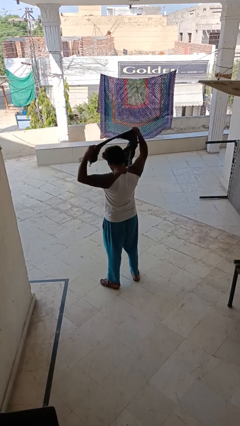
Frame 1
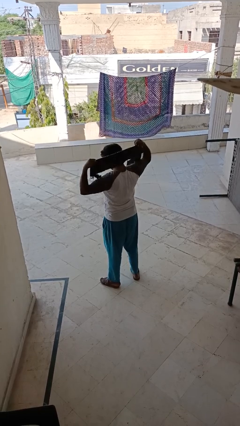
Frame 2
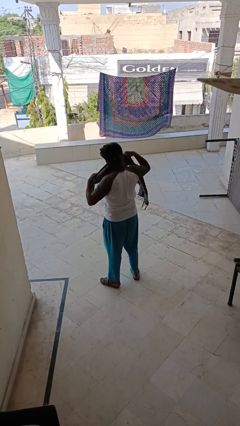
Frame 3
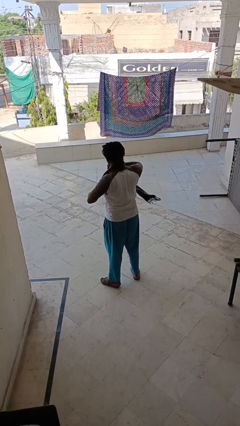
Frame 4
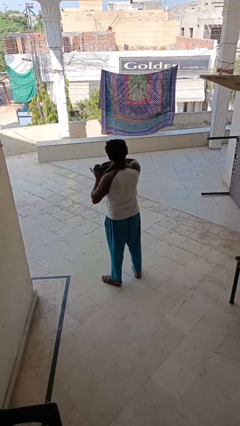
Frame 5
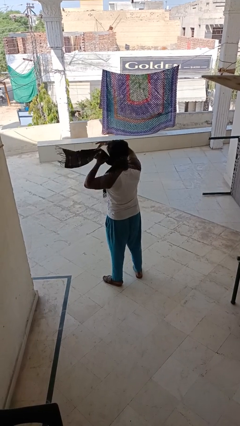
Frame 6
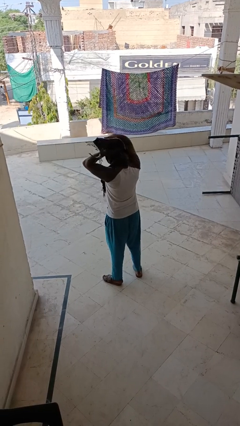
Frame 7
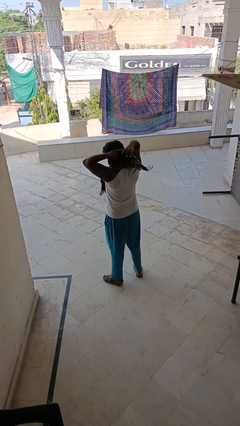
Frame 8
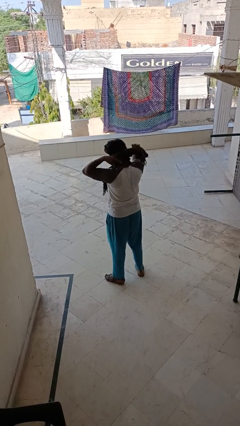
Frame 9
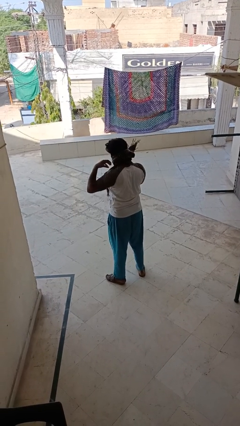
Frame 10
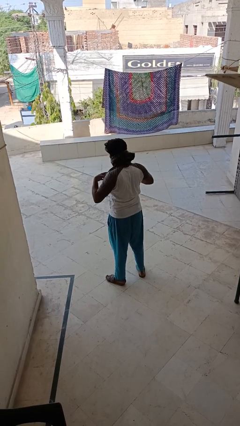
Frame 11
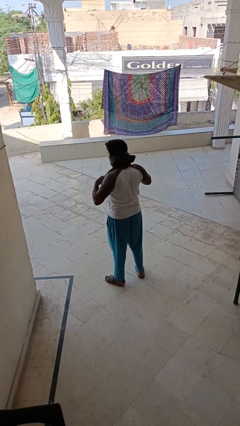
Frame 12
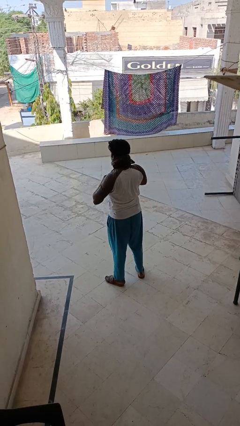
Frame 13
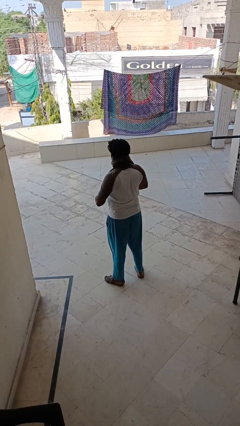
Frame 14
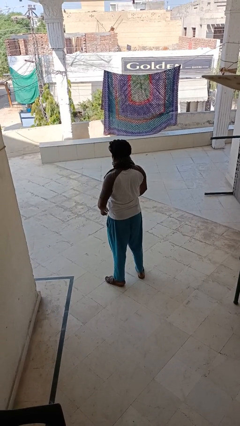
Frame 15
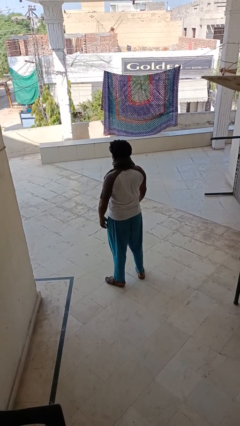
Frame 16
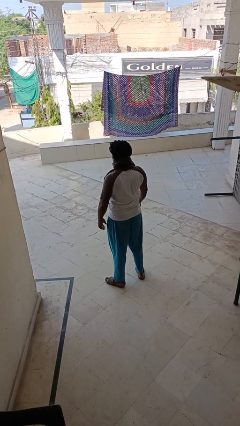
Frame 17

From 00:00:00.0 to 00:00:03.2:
person puts on scarf

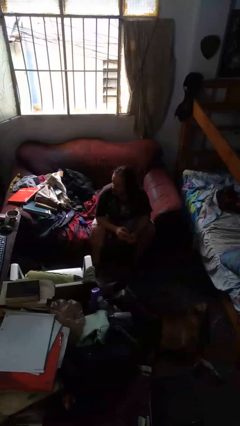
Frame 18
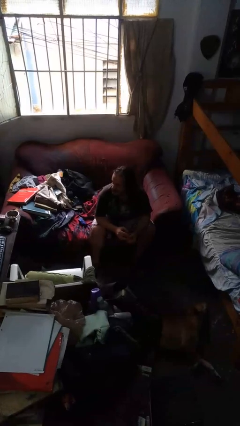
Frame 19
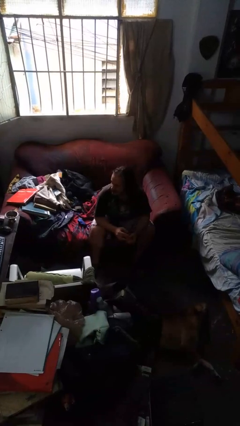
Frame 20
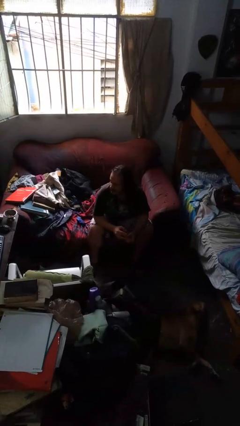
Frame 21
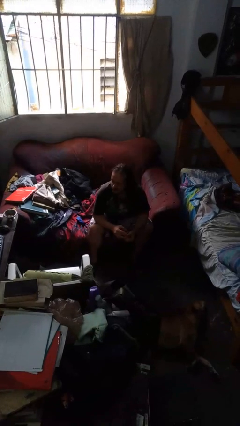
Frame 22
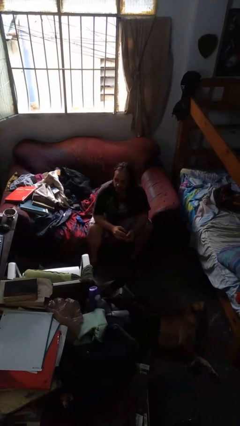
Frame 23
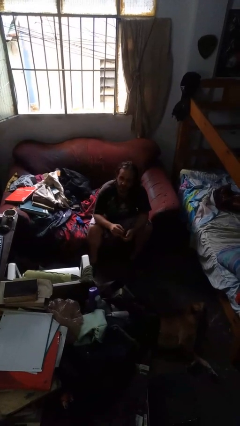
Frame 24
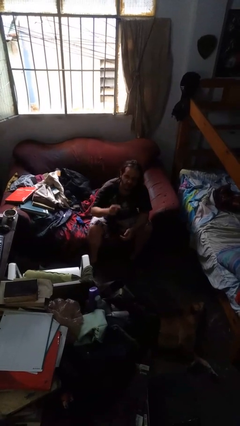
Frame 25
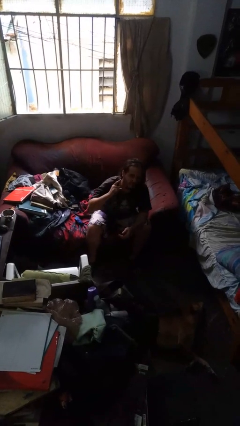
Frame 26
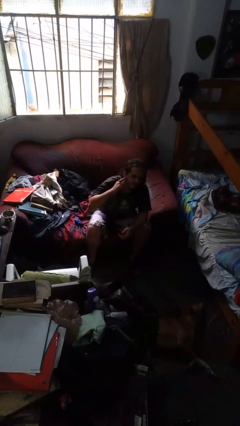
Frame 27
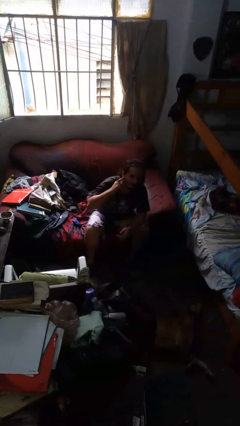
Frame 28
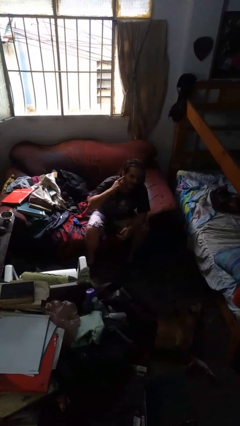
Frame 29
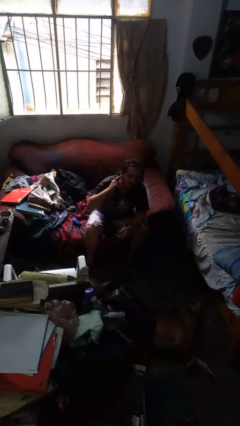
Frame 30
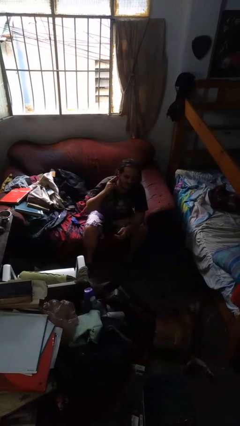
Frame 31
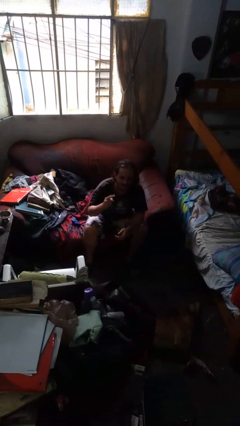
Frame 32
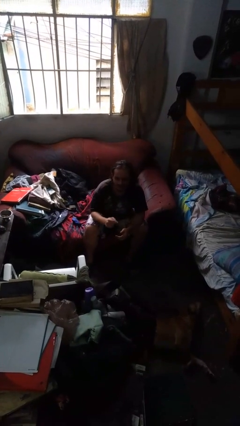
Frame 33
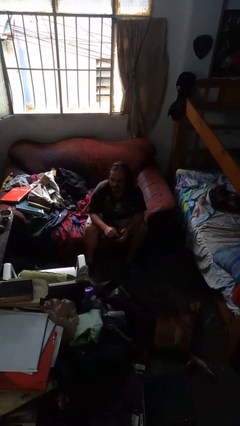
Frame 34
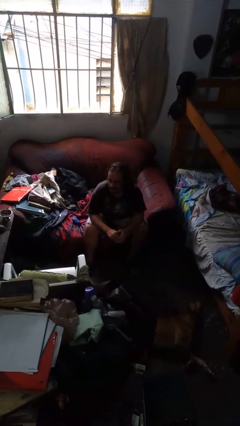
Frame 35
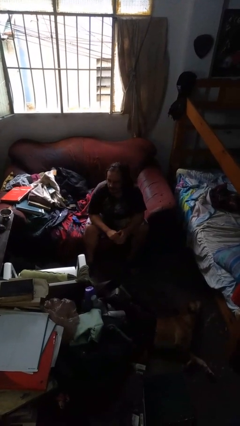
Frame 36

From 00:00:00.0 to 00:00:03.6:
person gestures listen closely

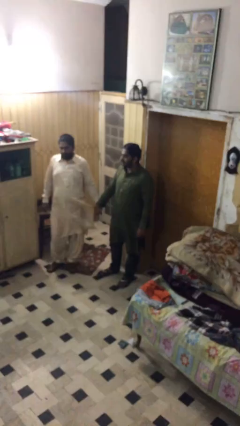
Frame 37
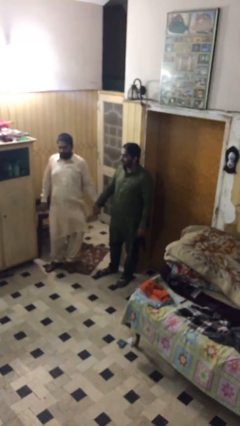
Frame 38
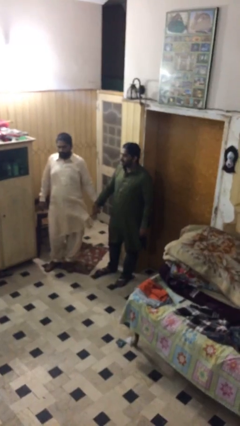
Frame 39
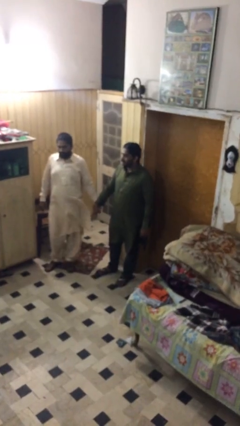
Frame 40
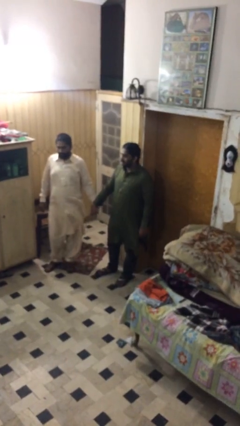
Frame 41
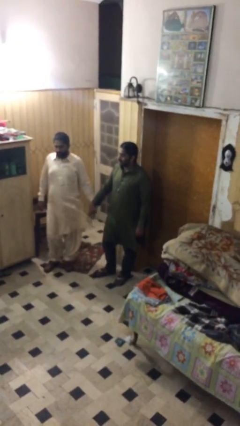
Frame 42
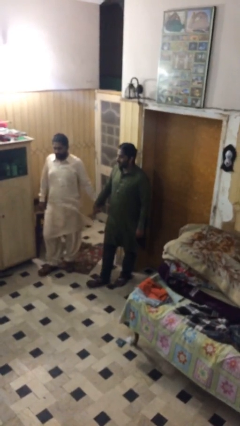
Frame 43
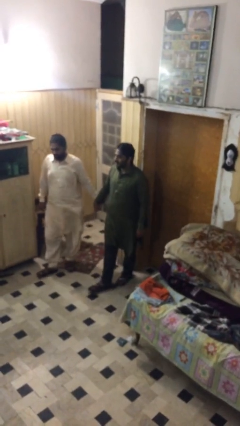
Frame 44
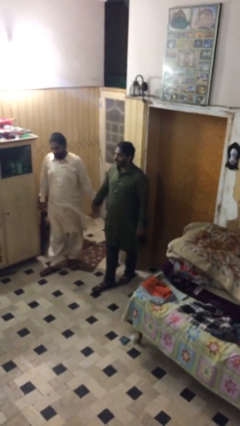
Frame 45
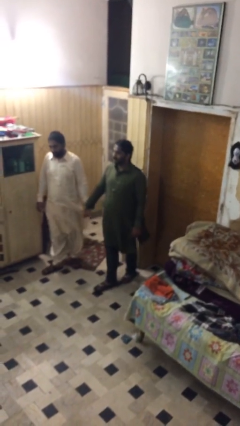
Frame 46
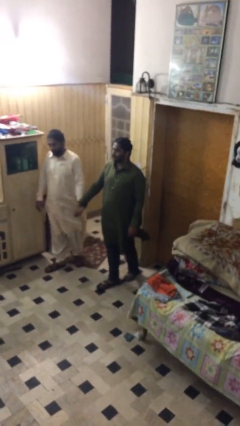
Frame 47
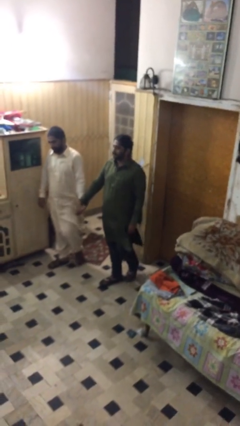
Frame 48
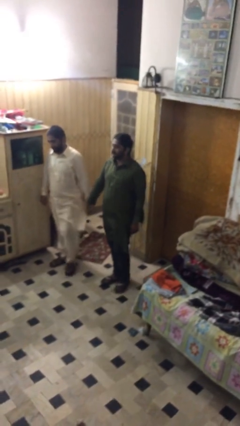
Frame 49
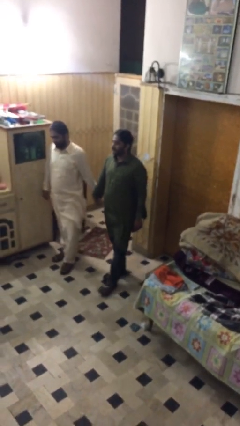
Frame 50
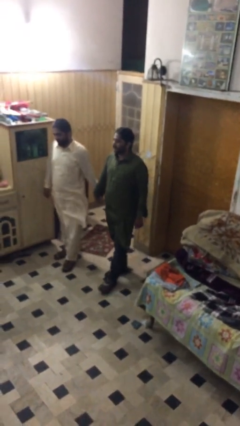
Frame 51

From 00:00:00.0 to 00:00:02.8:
person holds hand

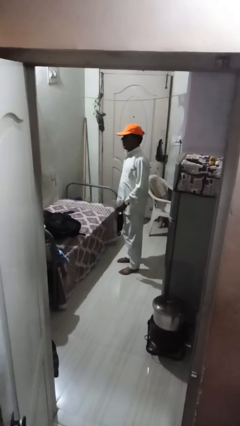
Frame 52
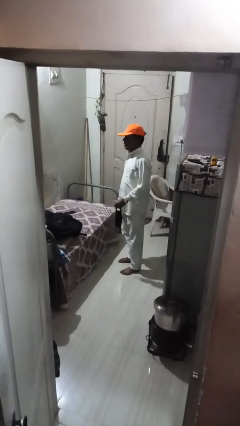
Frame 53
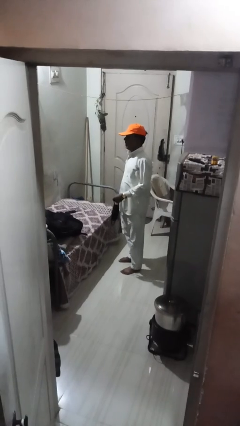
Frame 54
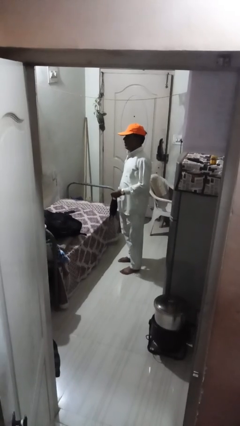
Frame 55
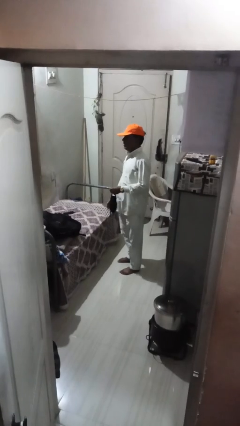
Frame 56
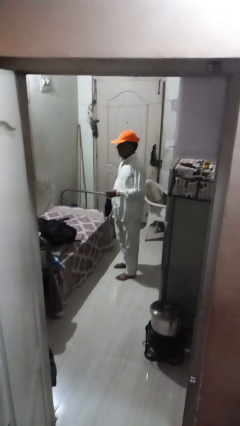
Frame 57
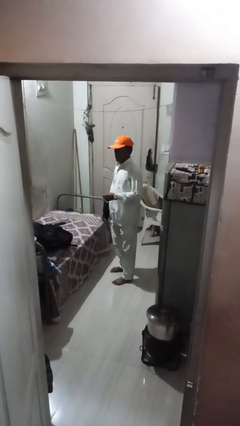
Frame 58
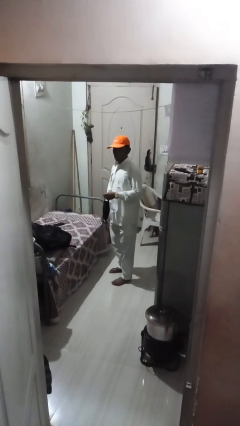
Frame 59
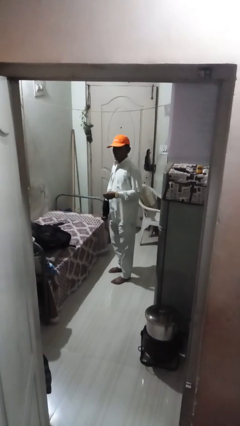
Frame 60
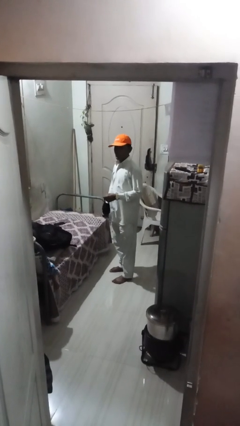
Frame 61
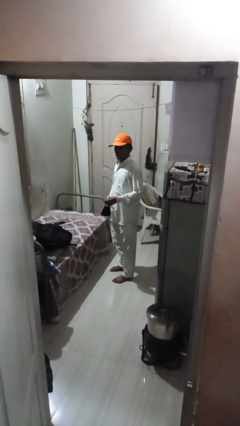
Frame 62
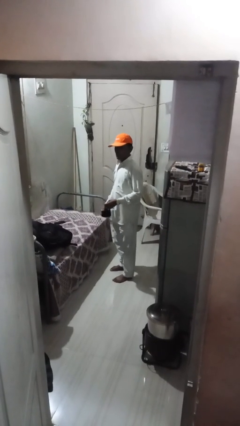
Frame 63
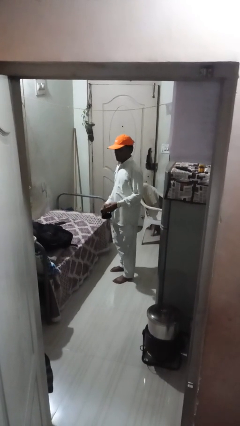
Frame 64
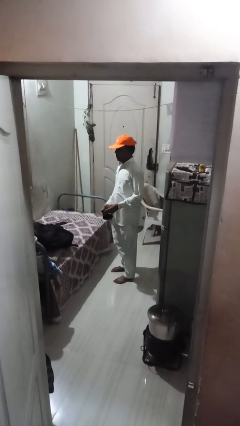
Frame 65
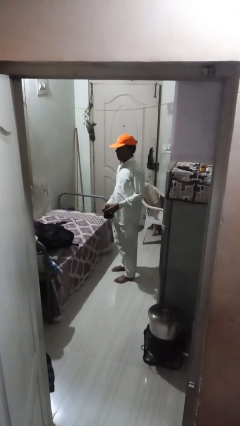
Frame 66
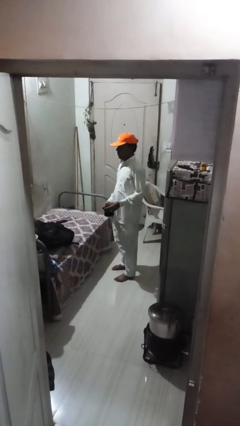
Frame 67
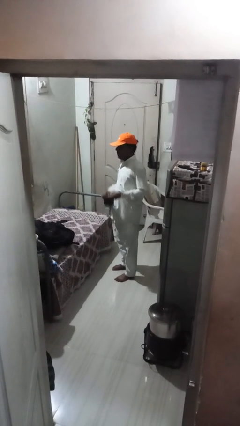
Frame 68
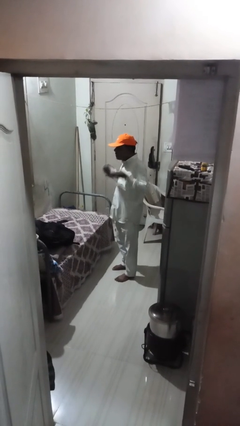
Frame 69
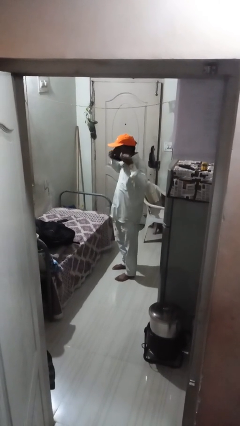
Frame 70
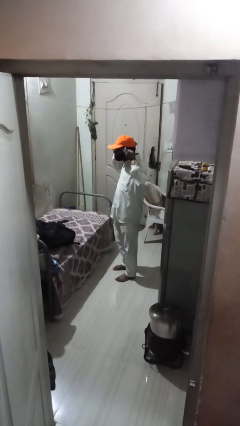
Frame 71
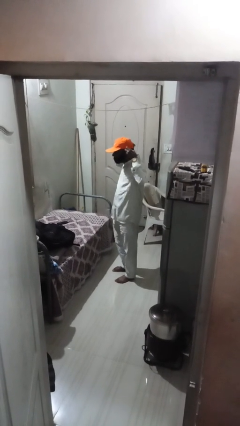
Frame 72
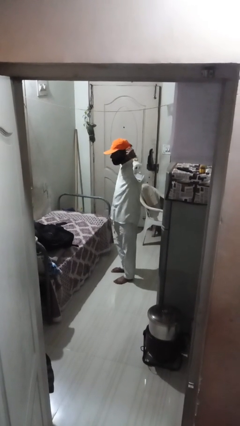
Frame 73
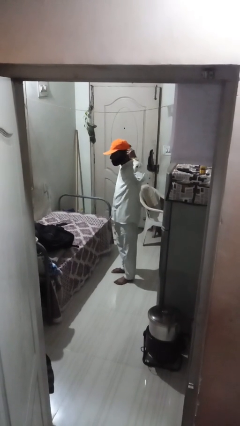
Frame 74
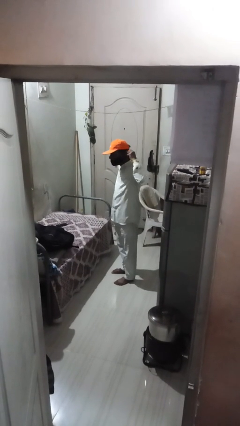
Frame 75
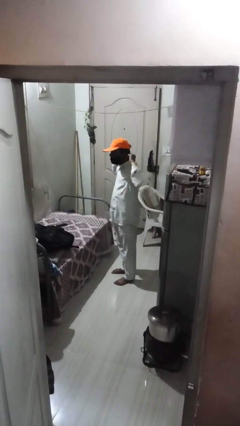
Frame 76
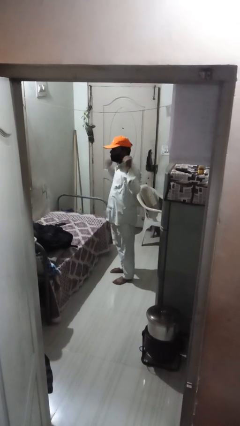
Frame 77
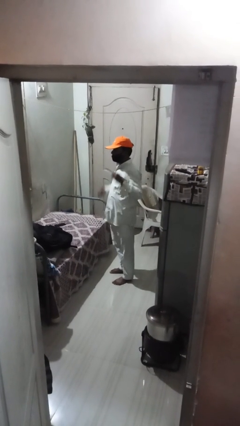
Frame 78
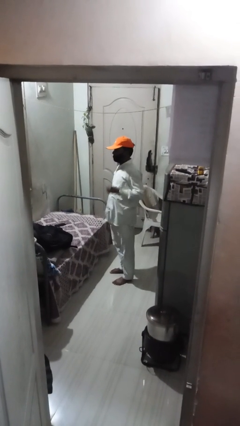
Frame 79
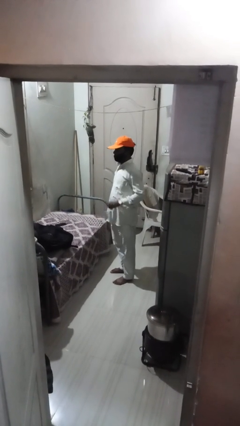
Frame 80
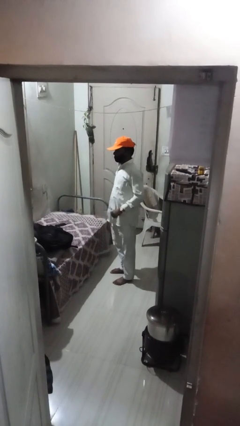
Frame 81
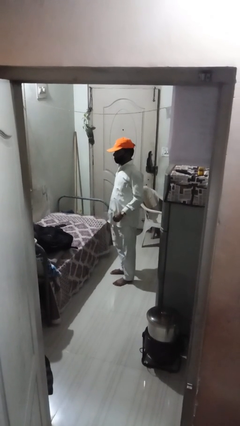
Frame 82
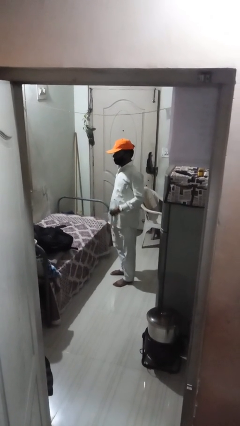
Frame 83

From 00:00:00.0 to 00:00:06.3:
person puts on facemask

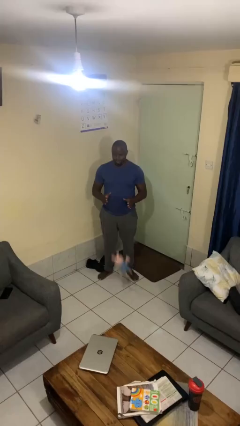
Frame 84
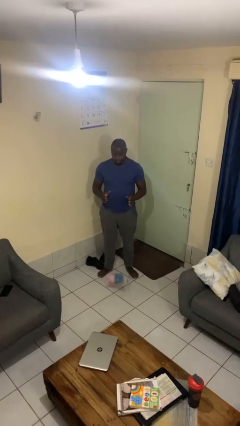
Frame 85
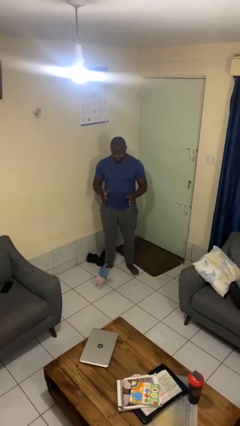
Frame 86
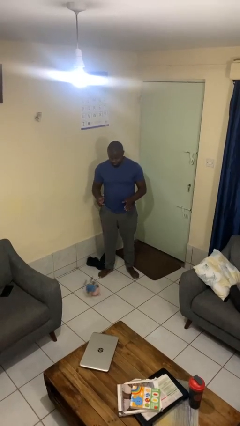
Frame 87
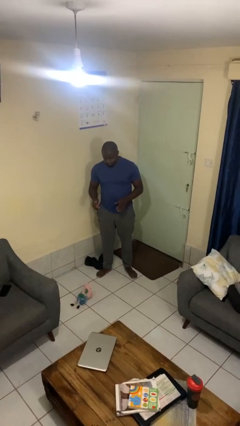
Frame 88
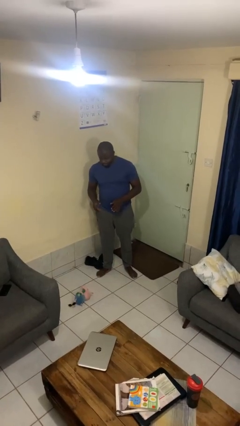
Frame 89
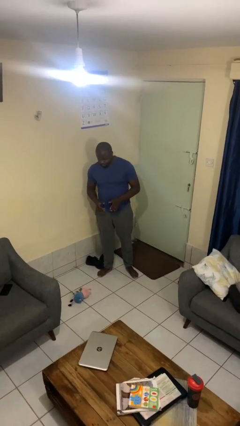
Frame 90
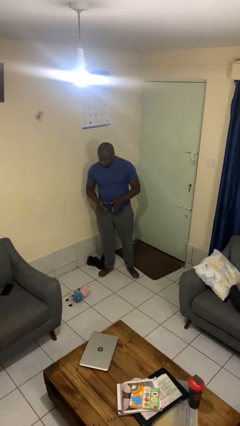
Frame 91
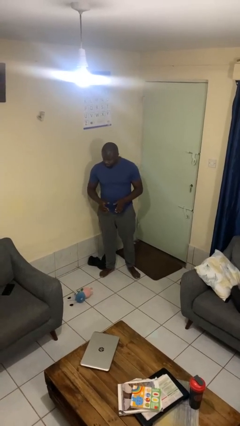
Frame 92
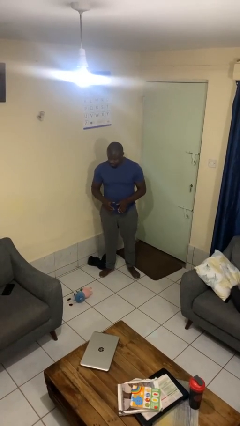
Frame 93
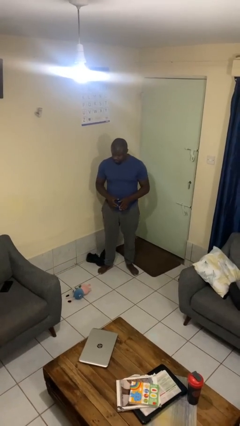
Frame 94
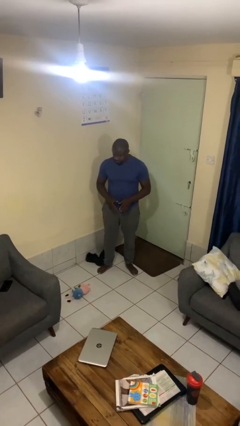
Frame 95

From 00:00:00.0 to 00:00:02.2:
person drops object
